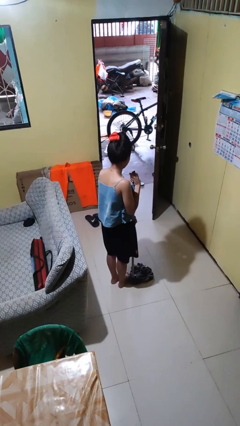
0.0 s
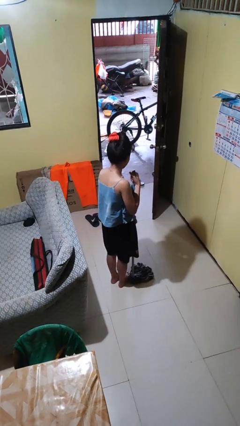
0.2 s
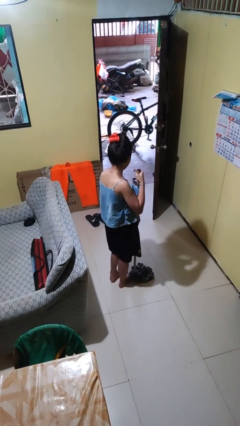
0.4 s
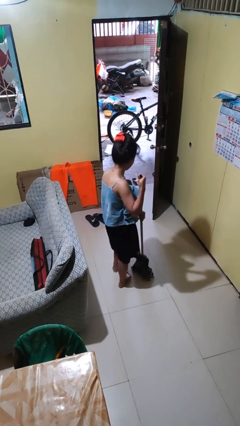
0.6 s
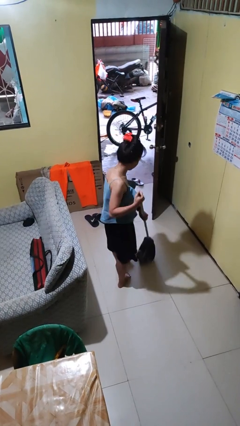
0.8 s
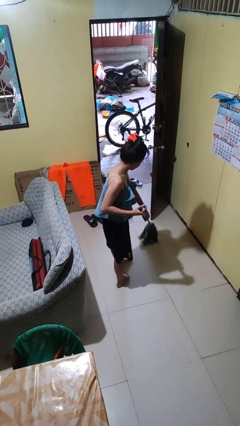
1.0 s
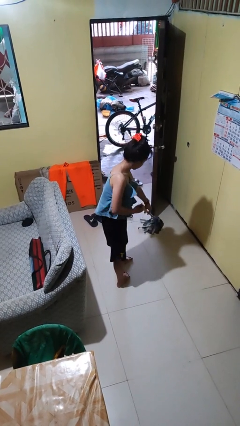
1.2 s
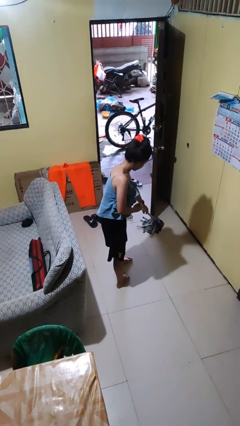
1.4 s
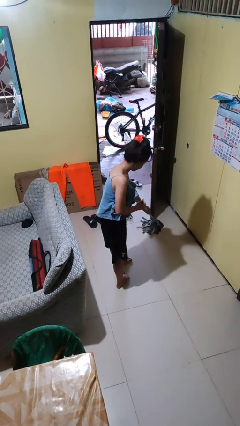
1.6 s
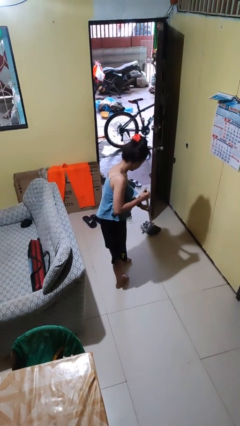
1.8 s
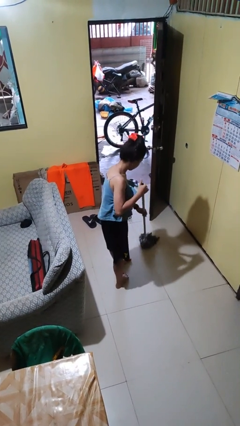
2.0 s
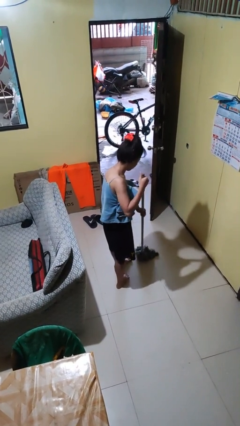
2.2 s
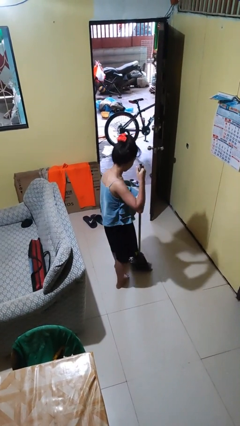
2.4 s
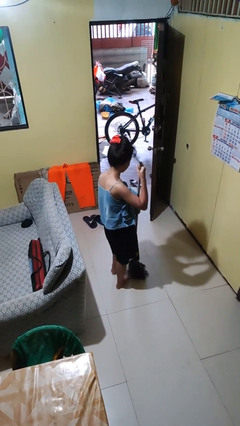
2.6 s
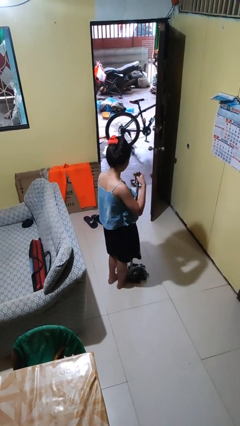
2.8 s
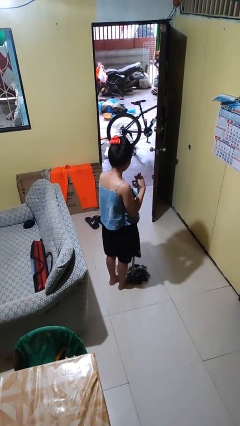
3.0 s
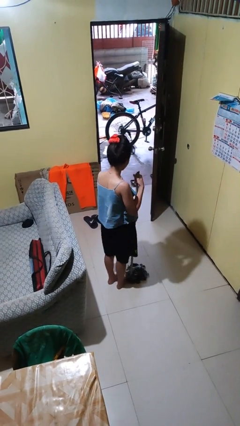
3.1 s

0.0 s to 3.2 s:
person mops

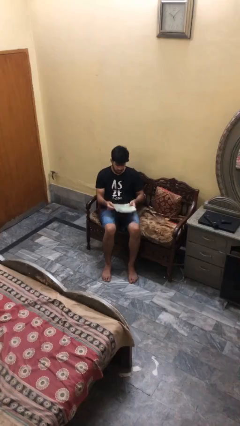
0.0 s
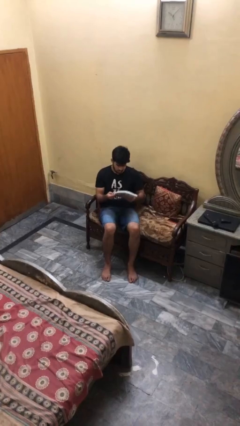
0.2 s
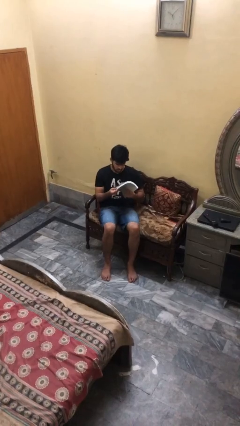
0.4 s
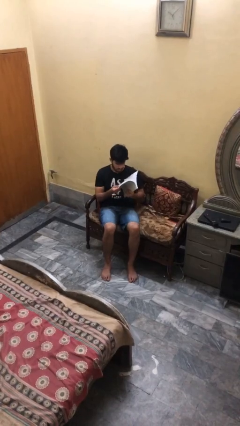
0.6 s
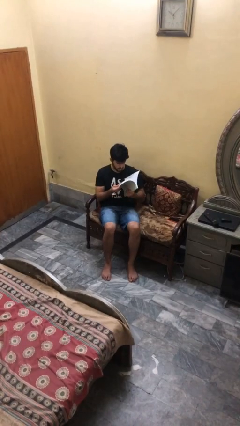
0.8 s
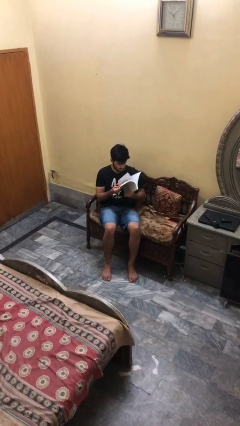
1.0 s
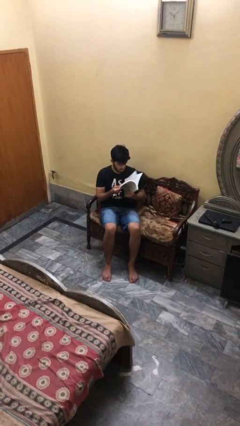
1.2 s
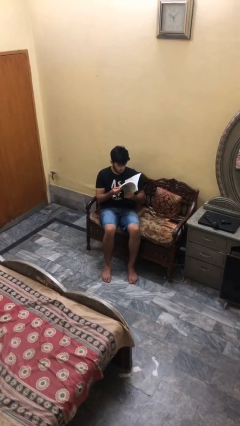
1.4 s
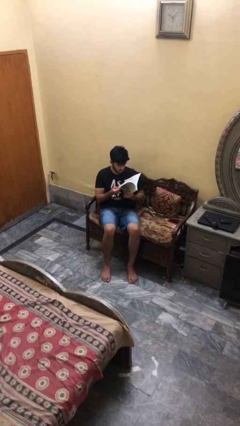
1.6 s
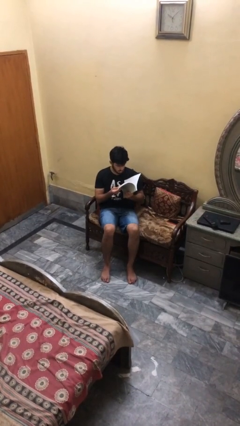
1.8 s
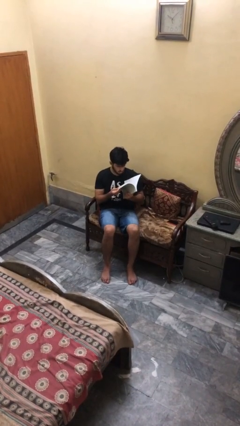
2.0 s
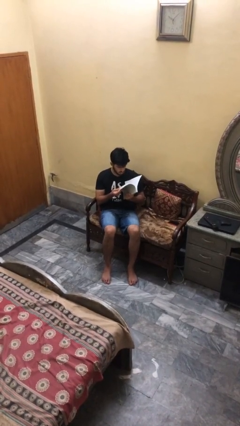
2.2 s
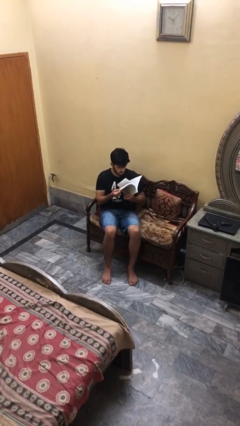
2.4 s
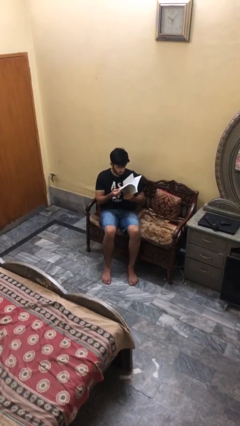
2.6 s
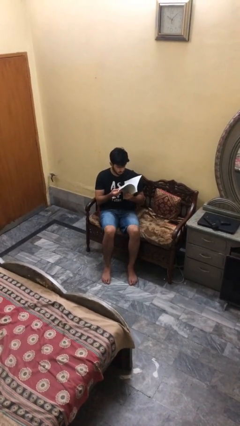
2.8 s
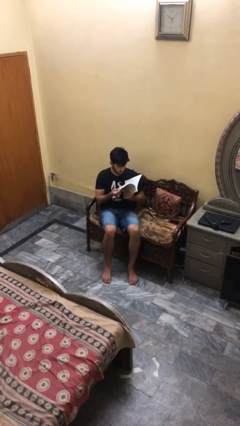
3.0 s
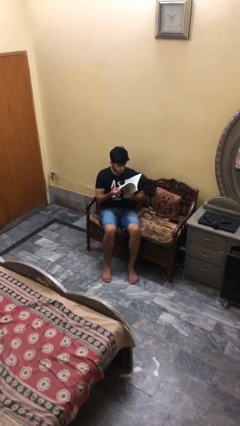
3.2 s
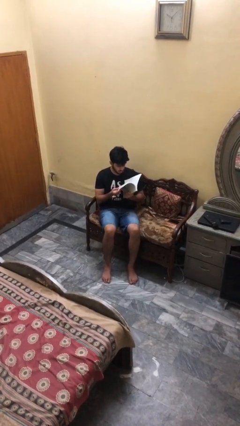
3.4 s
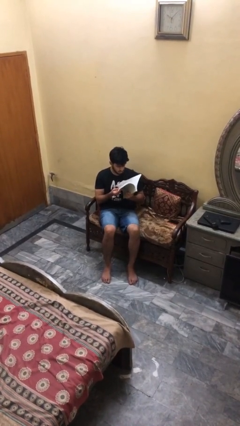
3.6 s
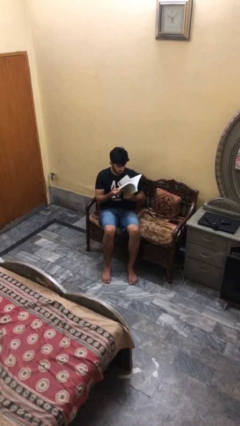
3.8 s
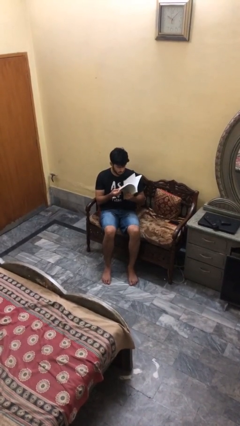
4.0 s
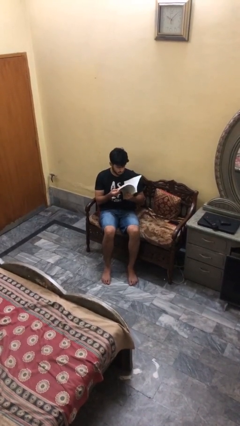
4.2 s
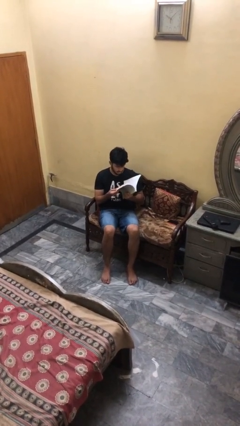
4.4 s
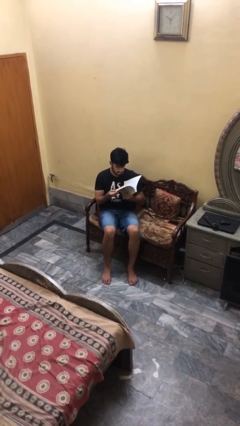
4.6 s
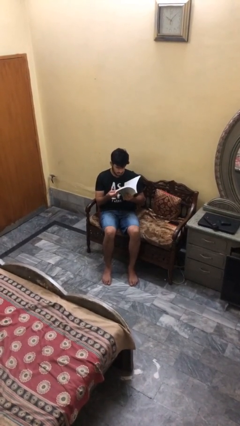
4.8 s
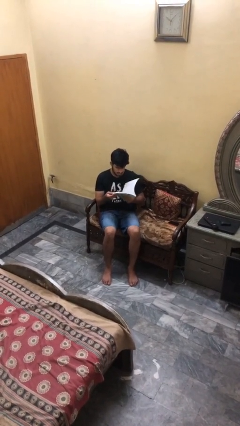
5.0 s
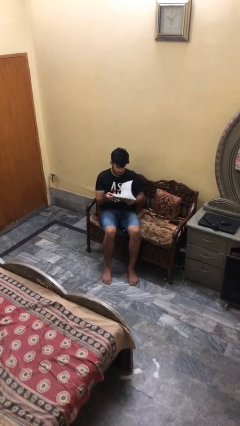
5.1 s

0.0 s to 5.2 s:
person reads book

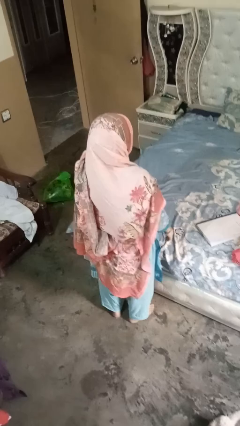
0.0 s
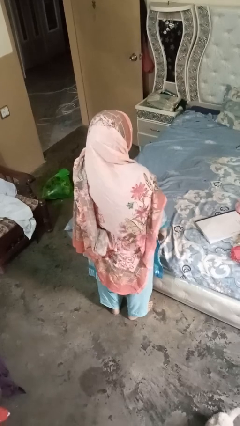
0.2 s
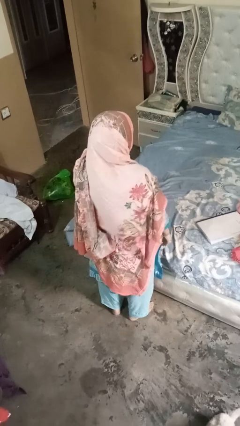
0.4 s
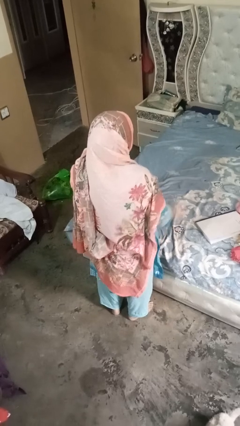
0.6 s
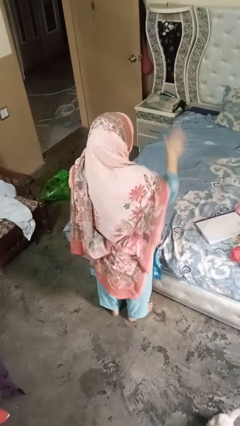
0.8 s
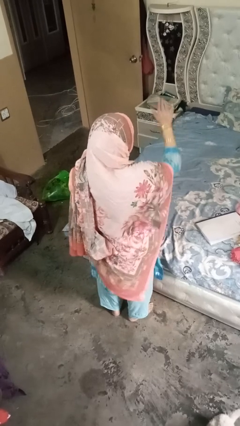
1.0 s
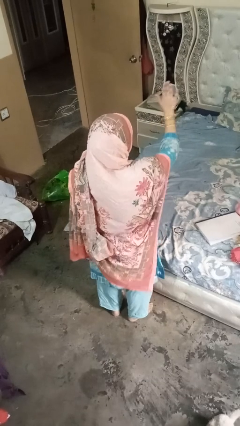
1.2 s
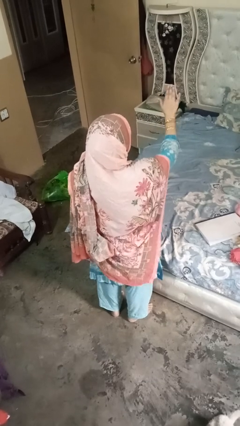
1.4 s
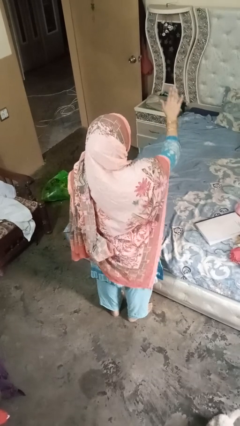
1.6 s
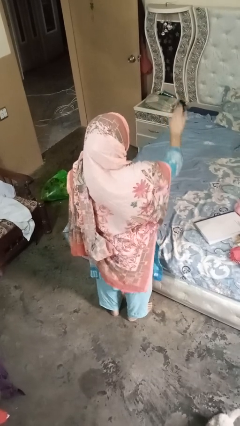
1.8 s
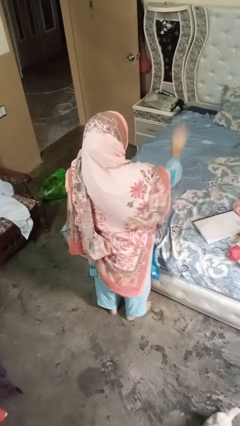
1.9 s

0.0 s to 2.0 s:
person gestures stop

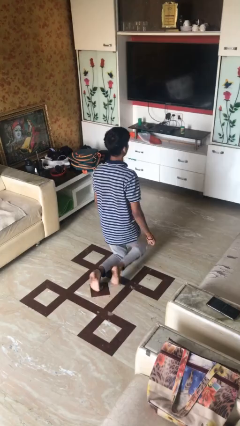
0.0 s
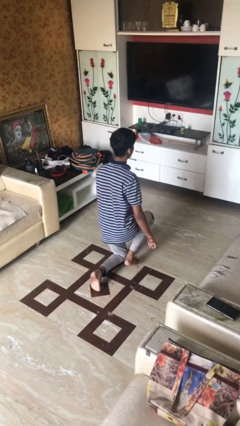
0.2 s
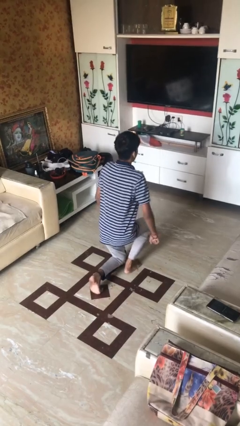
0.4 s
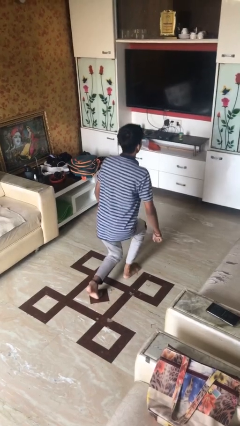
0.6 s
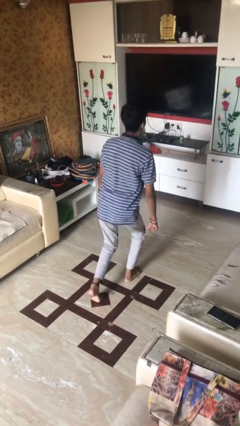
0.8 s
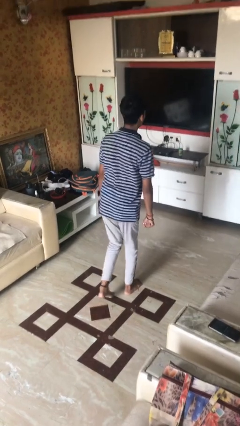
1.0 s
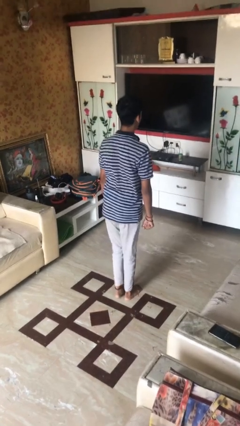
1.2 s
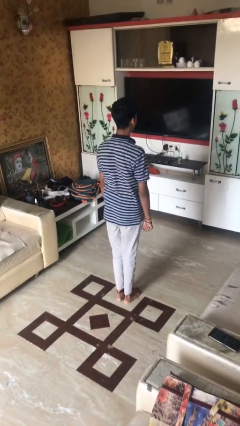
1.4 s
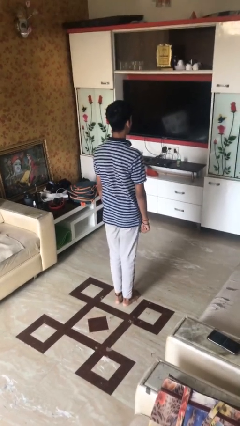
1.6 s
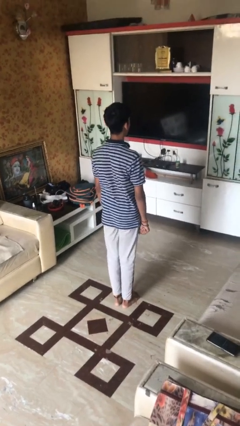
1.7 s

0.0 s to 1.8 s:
person stands up from floor

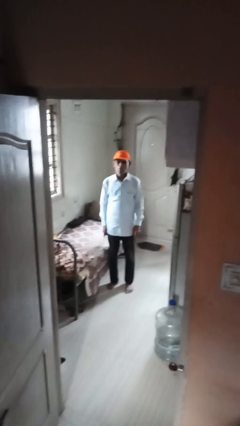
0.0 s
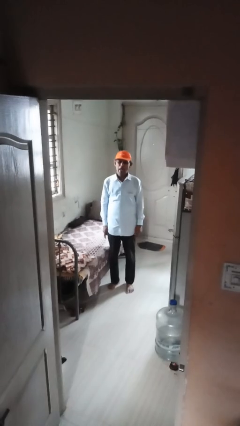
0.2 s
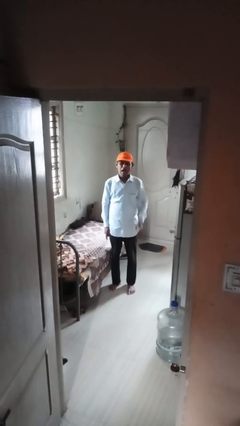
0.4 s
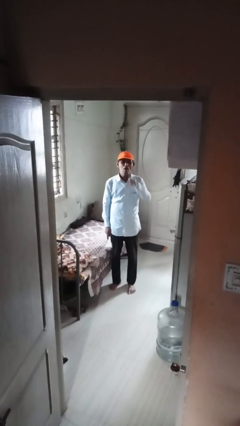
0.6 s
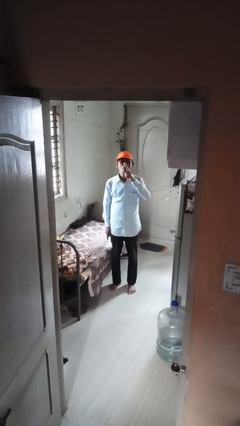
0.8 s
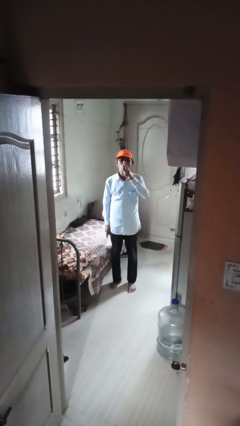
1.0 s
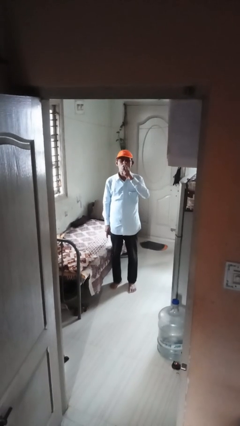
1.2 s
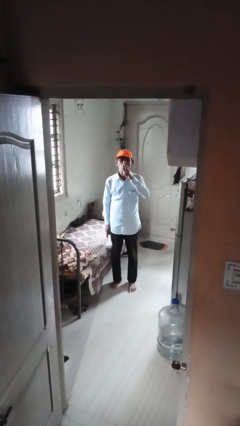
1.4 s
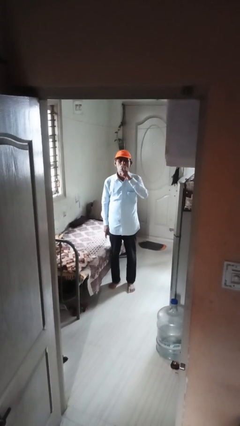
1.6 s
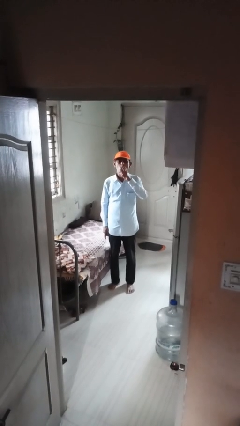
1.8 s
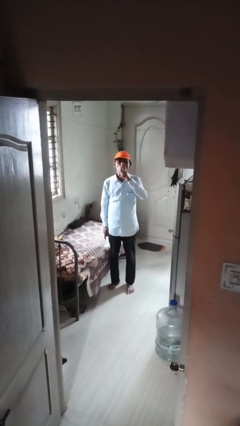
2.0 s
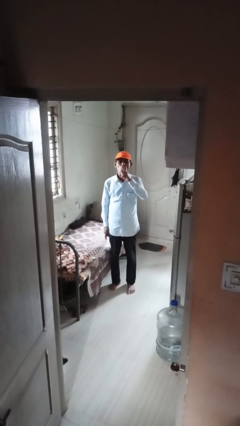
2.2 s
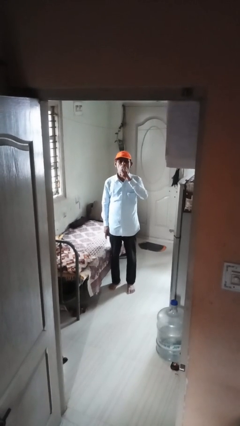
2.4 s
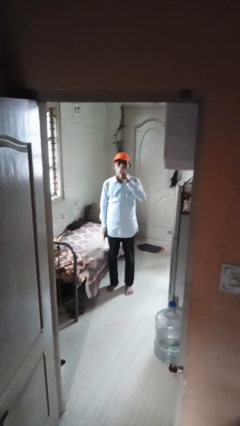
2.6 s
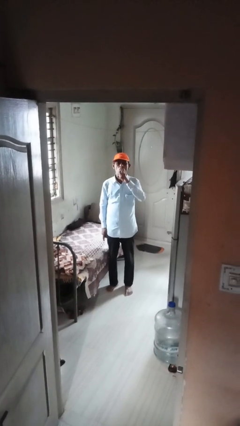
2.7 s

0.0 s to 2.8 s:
person gestures be quiet

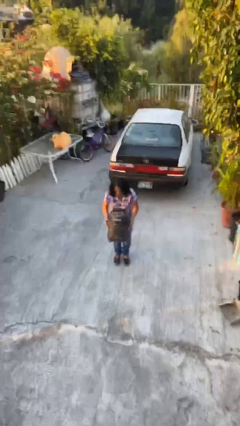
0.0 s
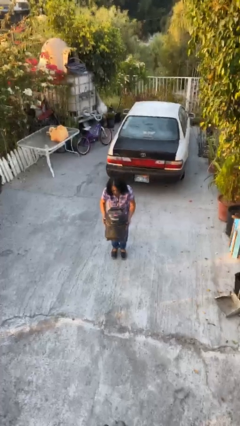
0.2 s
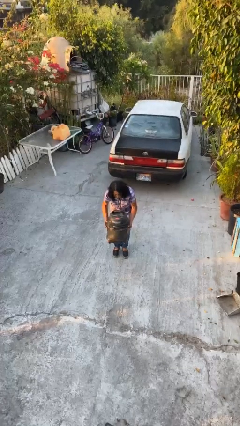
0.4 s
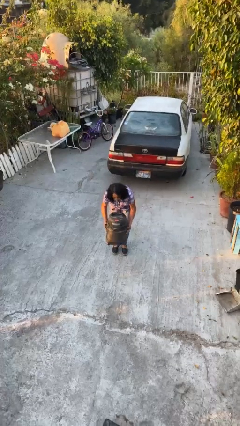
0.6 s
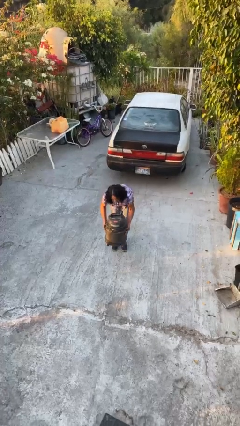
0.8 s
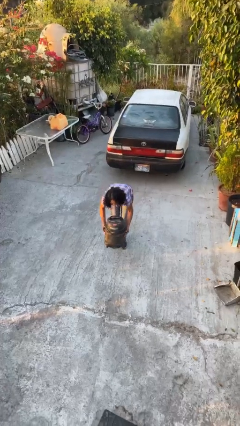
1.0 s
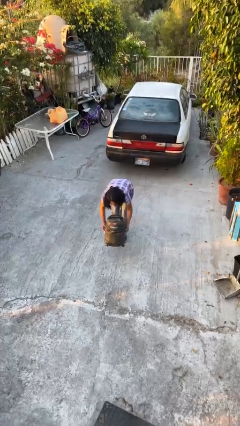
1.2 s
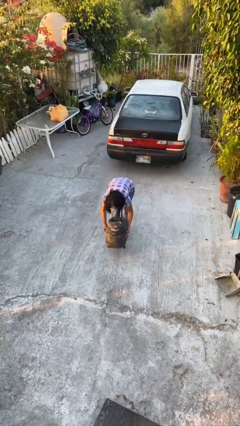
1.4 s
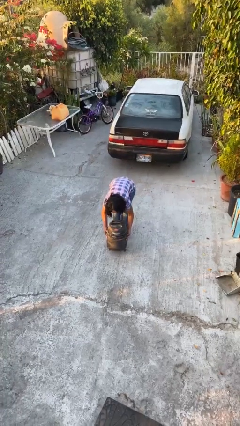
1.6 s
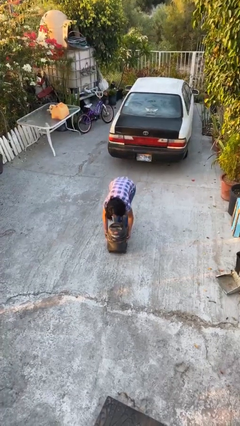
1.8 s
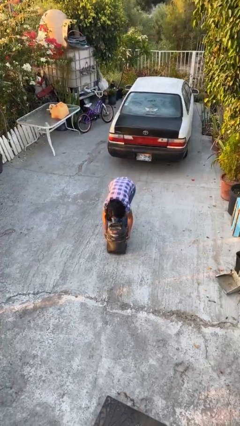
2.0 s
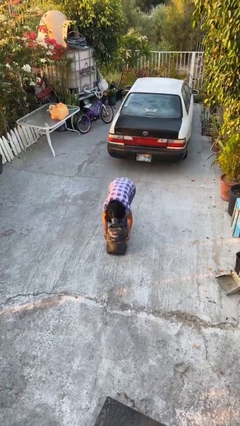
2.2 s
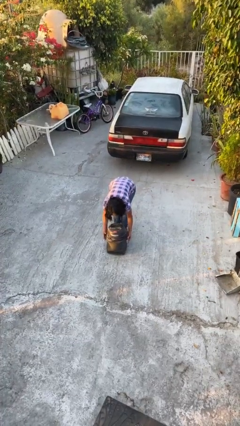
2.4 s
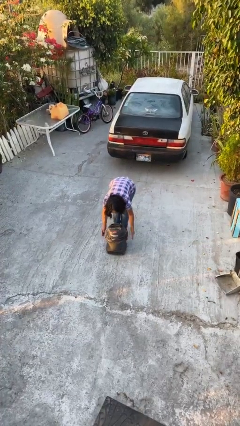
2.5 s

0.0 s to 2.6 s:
person puts down object on floor
